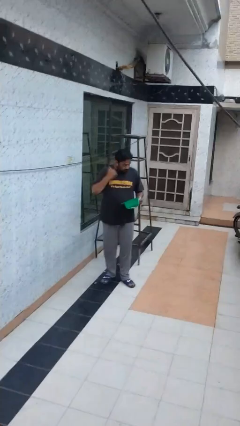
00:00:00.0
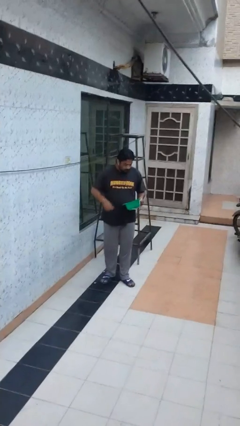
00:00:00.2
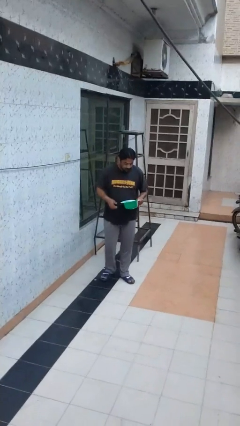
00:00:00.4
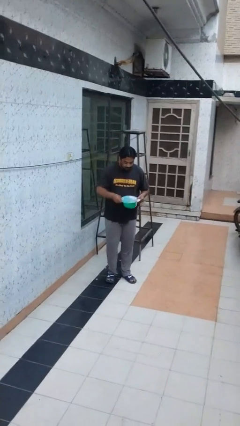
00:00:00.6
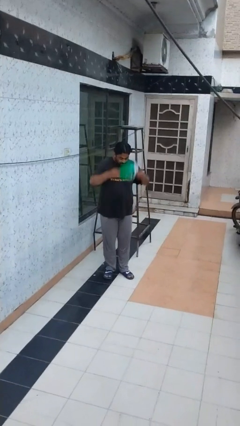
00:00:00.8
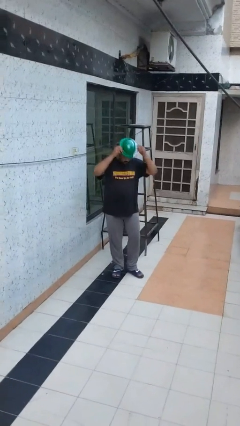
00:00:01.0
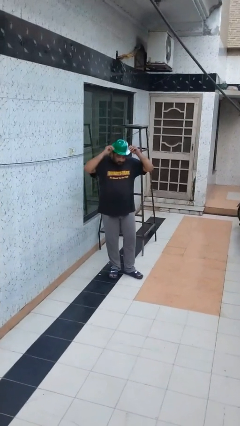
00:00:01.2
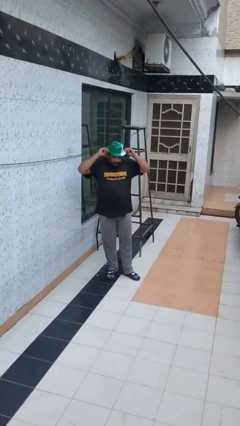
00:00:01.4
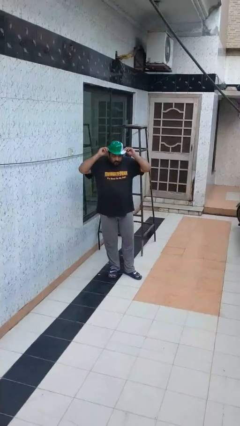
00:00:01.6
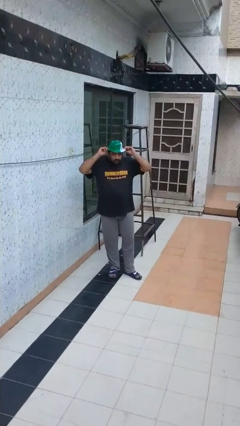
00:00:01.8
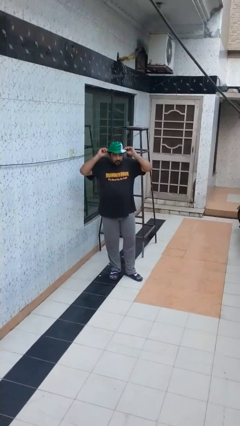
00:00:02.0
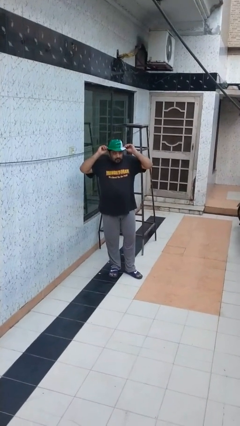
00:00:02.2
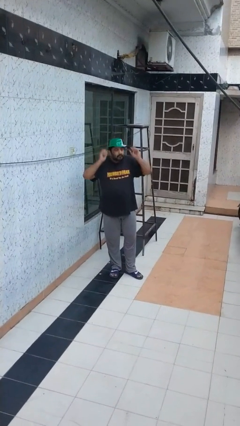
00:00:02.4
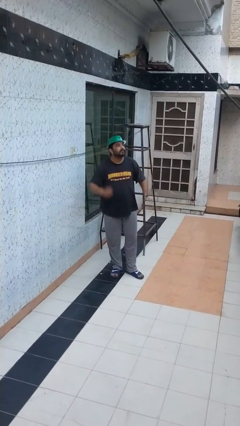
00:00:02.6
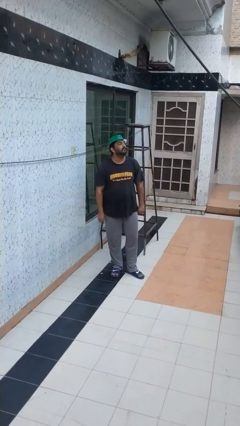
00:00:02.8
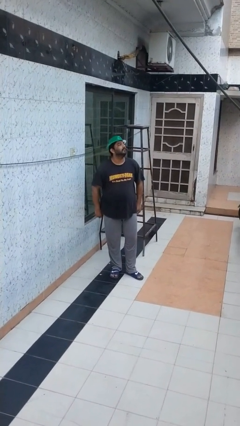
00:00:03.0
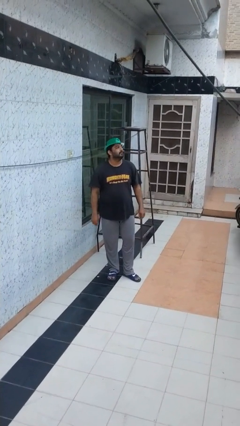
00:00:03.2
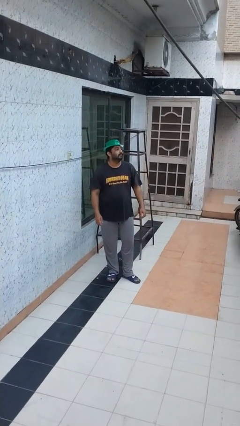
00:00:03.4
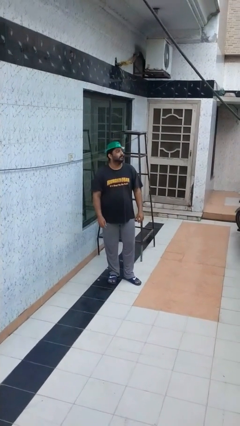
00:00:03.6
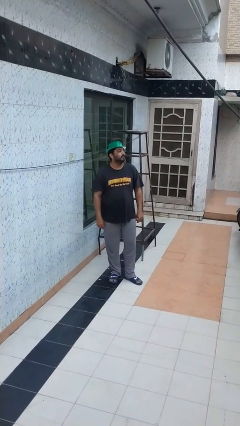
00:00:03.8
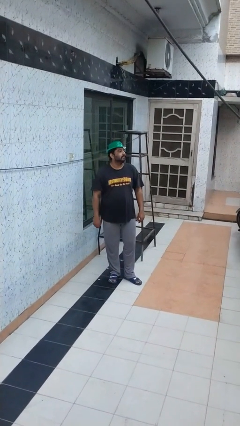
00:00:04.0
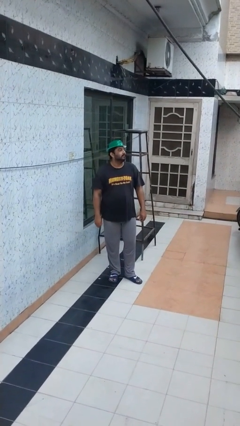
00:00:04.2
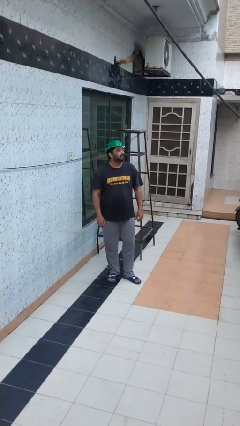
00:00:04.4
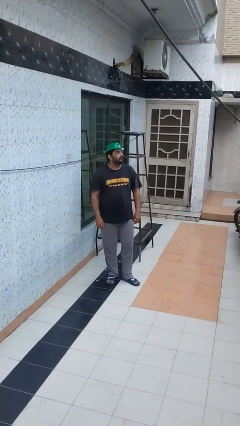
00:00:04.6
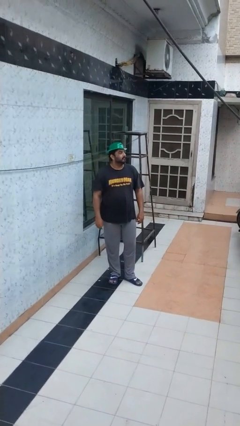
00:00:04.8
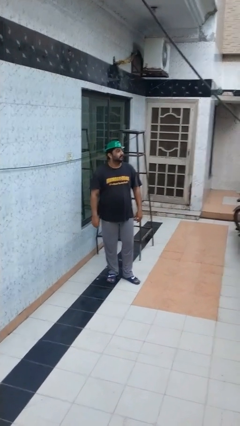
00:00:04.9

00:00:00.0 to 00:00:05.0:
person puts on hat

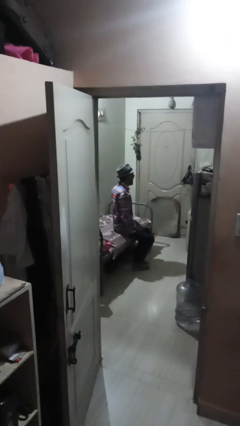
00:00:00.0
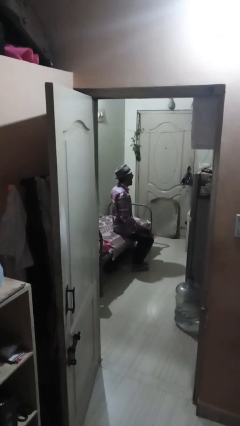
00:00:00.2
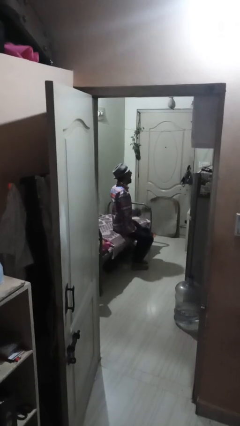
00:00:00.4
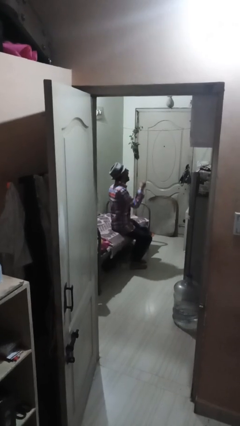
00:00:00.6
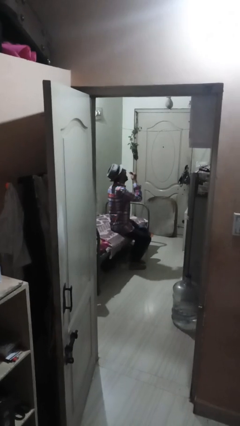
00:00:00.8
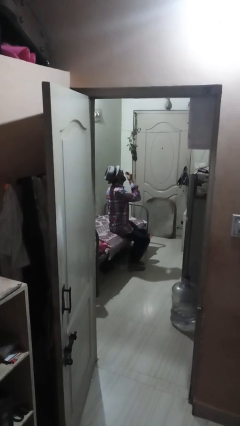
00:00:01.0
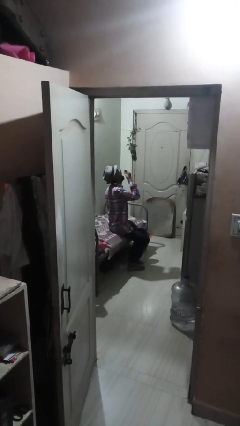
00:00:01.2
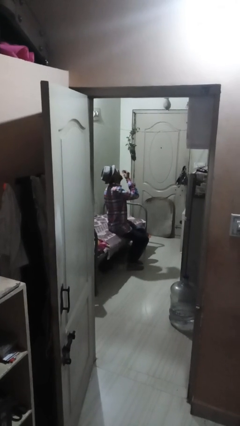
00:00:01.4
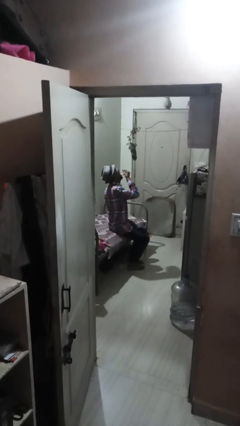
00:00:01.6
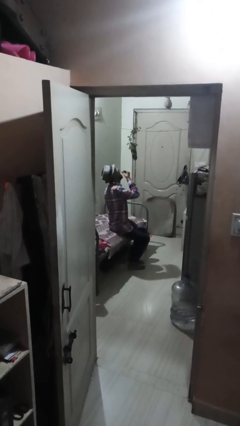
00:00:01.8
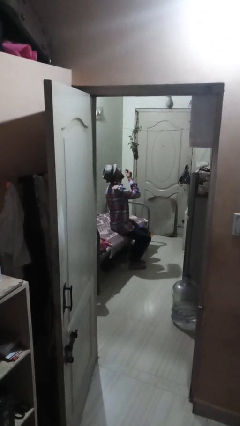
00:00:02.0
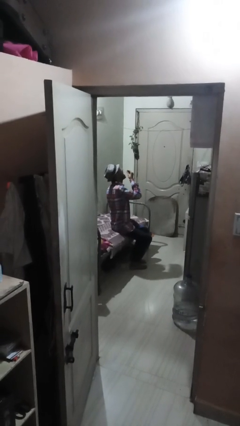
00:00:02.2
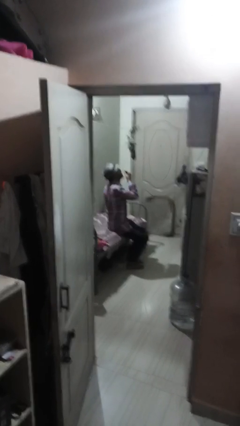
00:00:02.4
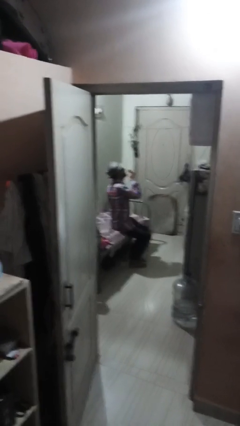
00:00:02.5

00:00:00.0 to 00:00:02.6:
person yawns

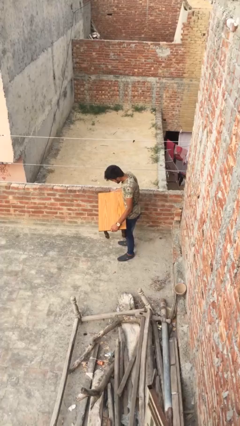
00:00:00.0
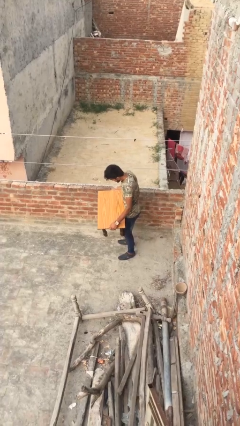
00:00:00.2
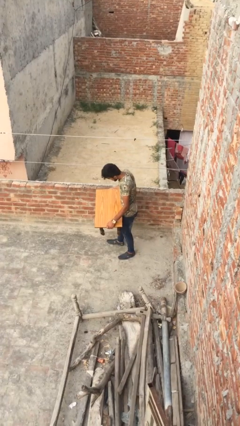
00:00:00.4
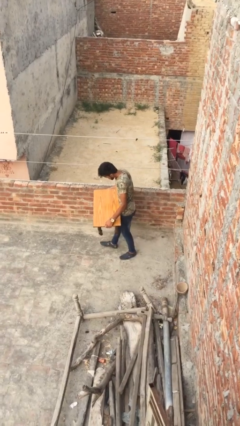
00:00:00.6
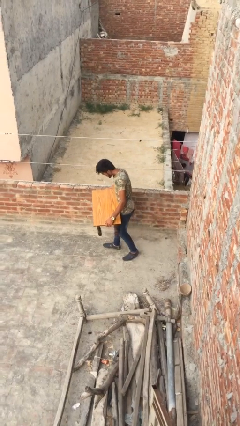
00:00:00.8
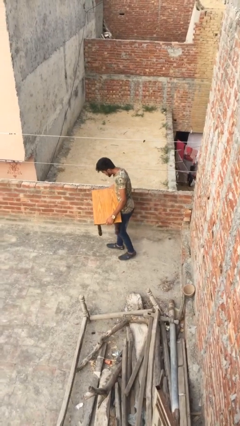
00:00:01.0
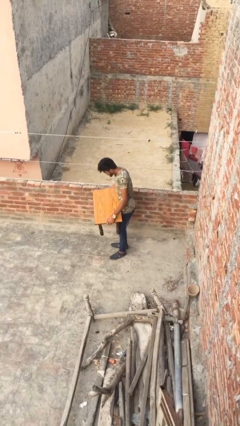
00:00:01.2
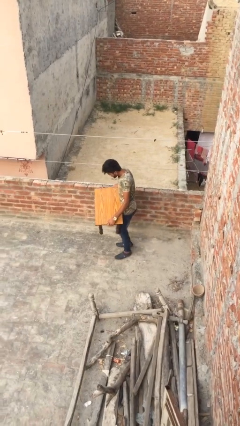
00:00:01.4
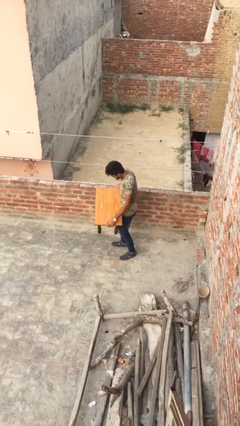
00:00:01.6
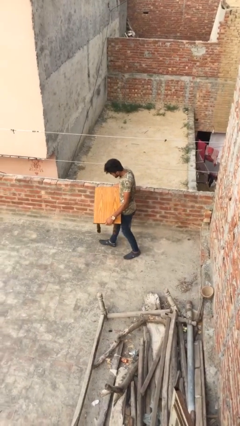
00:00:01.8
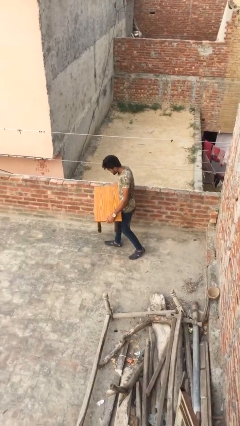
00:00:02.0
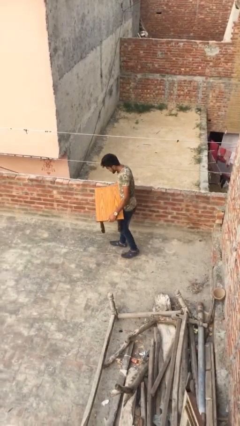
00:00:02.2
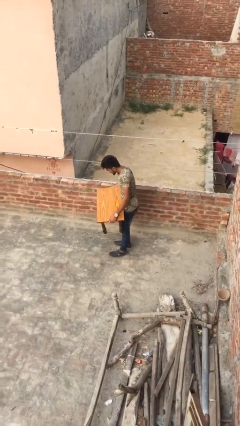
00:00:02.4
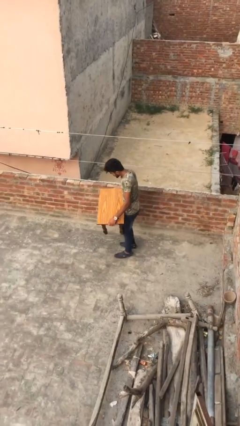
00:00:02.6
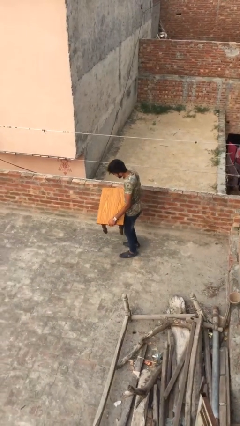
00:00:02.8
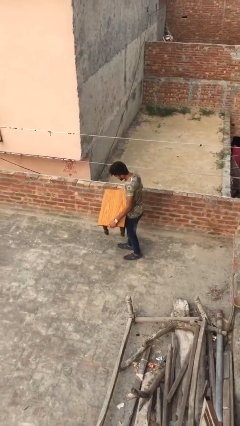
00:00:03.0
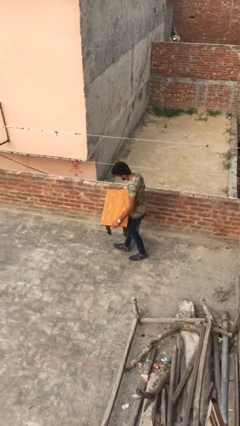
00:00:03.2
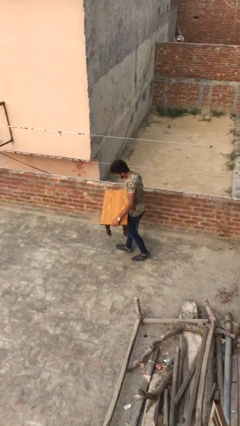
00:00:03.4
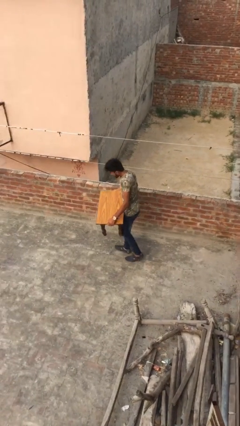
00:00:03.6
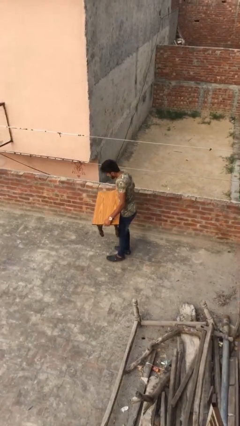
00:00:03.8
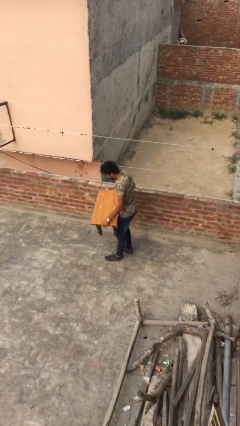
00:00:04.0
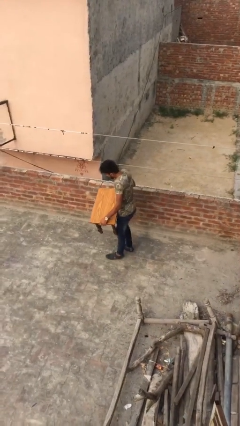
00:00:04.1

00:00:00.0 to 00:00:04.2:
person carries heavy object

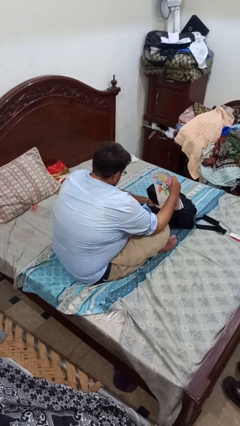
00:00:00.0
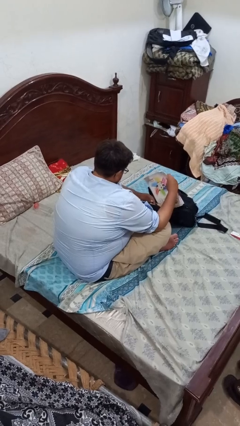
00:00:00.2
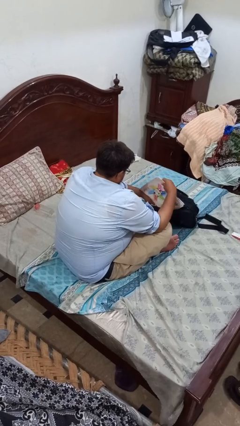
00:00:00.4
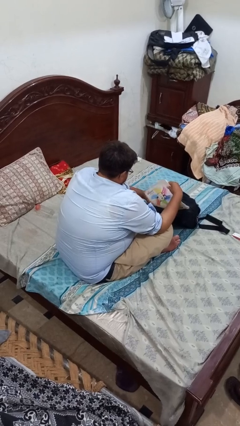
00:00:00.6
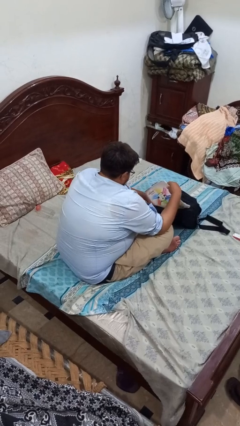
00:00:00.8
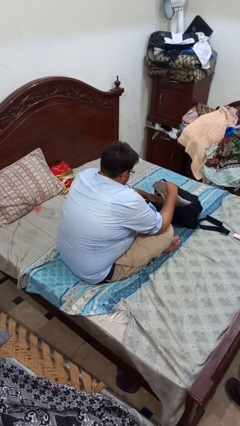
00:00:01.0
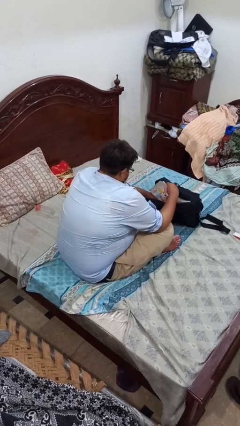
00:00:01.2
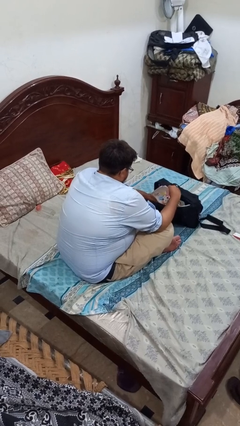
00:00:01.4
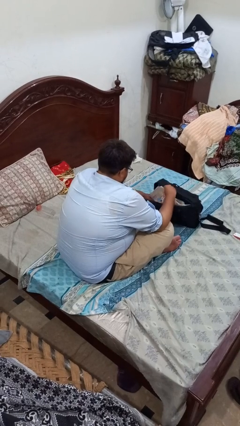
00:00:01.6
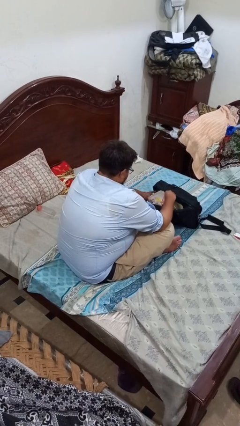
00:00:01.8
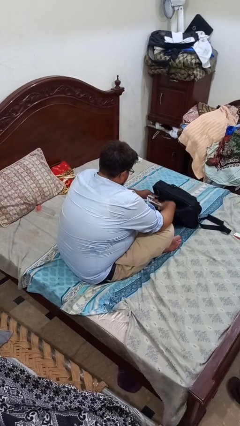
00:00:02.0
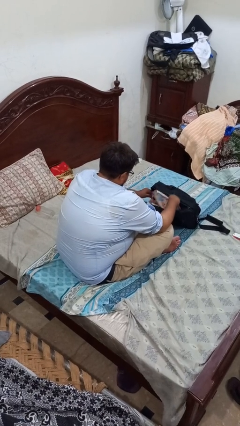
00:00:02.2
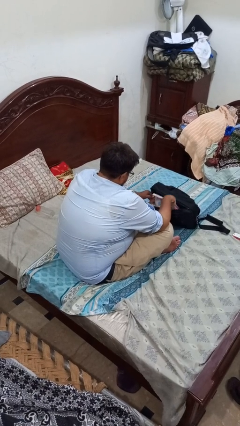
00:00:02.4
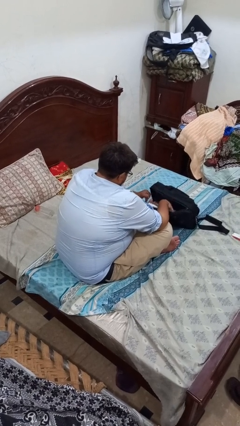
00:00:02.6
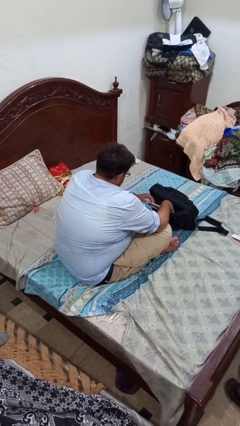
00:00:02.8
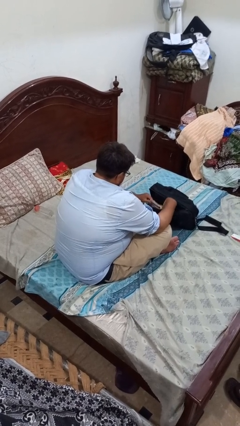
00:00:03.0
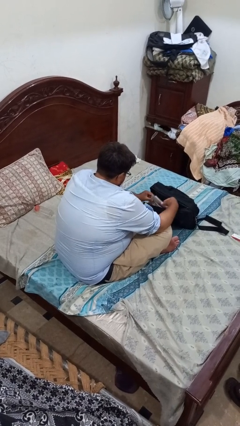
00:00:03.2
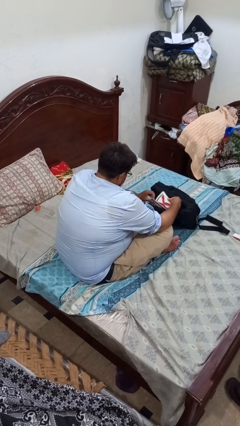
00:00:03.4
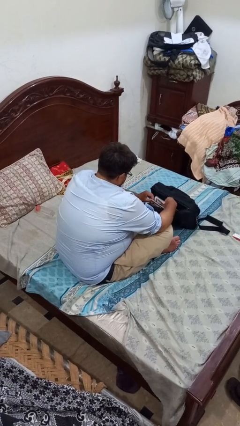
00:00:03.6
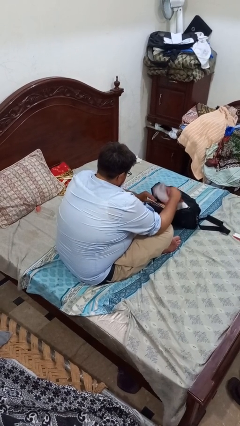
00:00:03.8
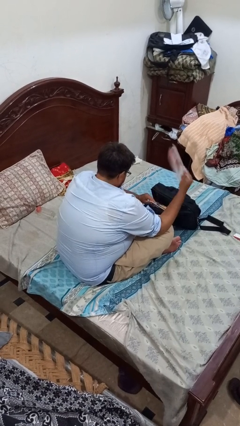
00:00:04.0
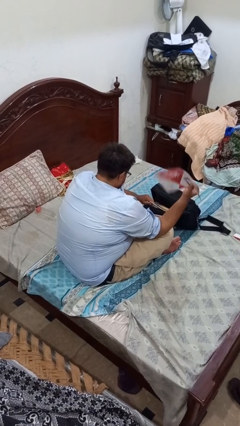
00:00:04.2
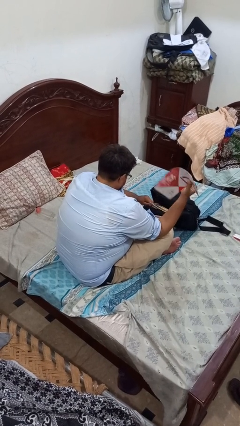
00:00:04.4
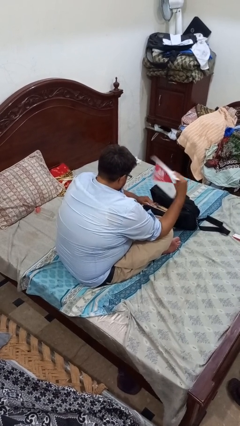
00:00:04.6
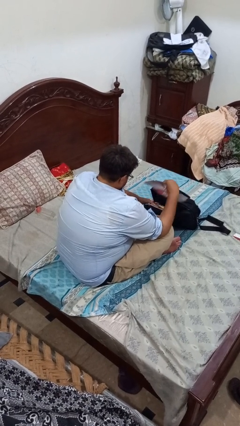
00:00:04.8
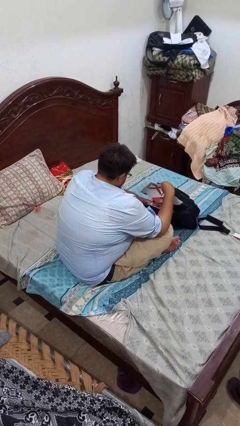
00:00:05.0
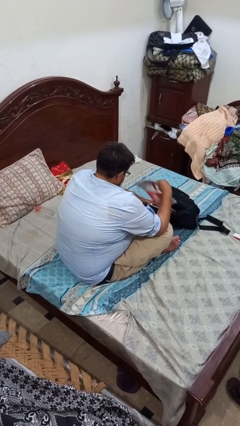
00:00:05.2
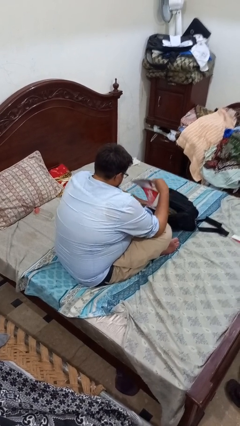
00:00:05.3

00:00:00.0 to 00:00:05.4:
person searches in bag
